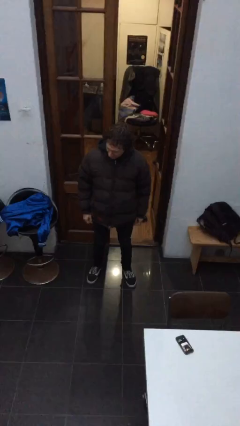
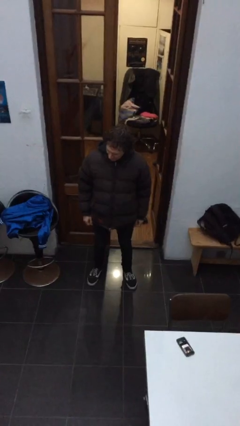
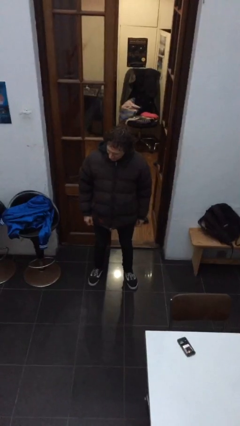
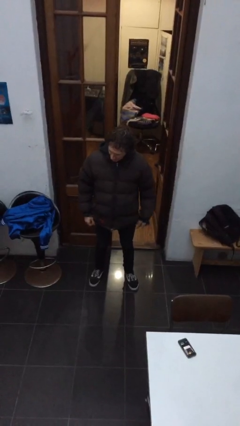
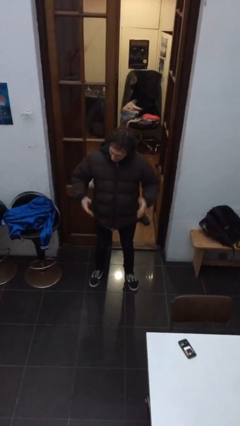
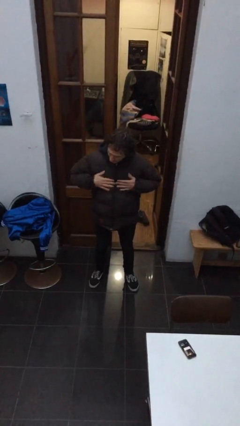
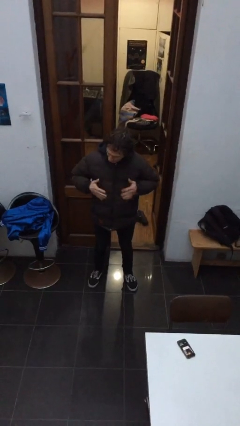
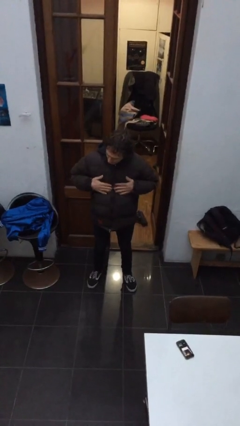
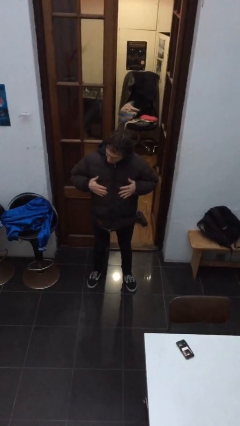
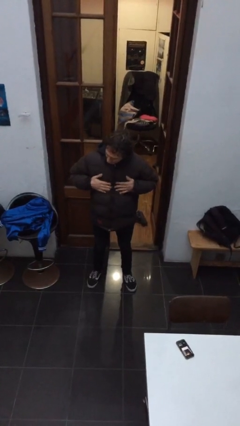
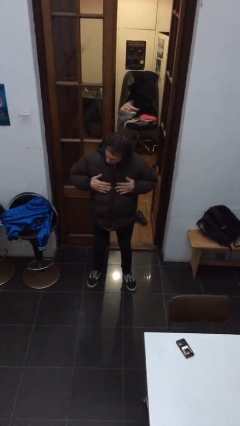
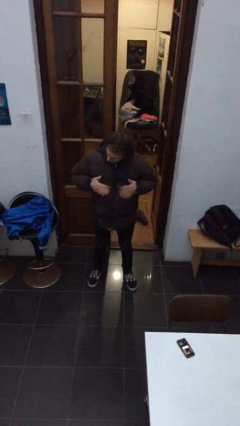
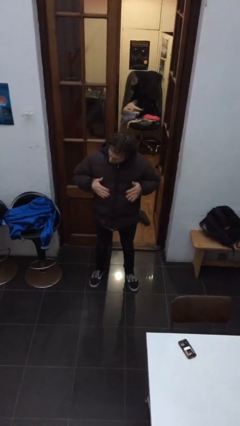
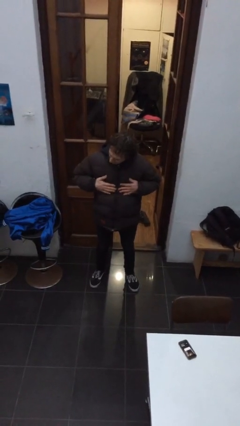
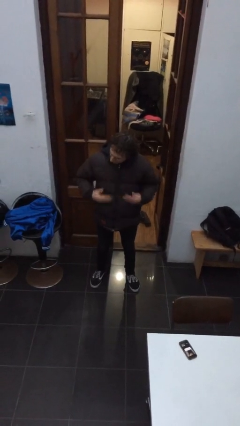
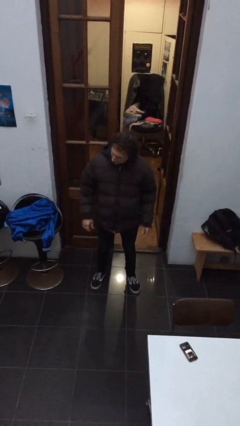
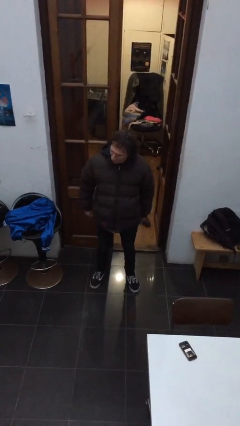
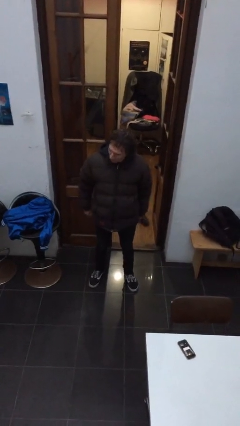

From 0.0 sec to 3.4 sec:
person drums on chest

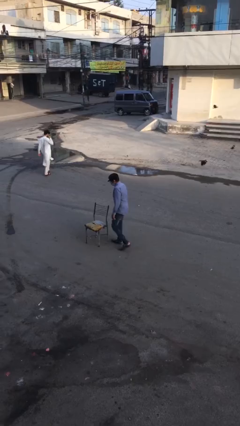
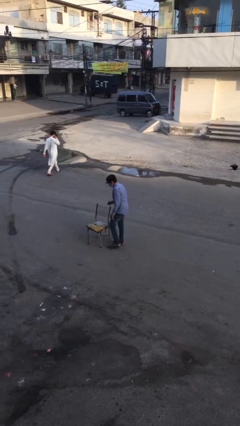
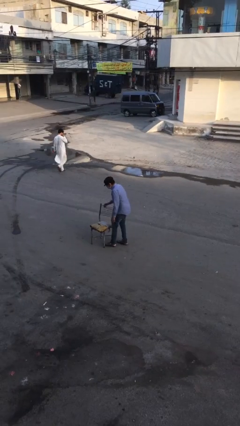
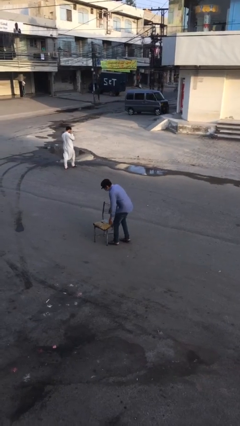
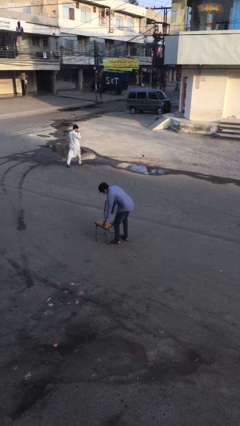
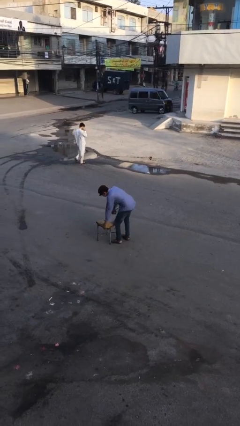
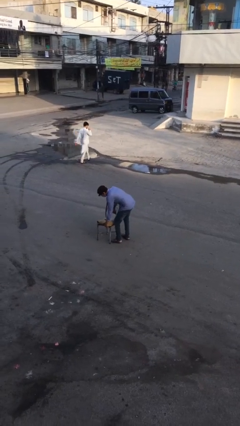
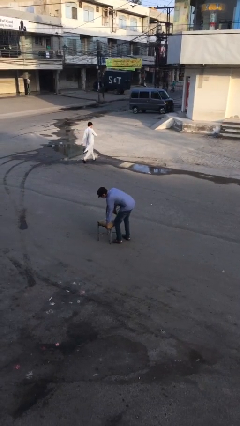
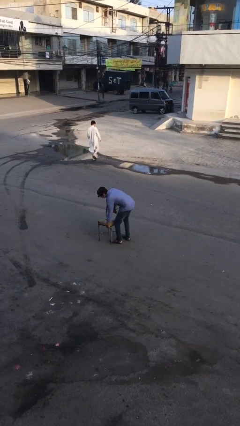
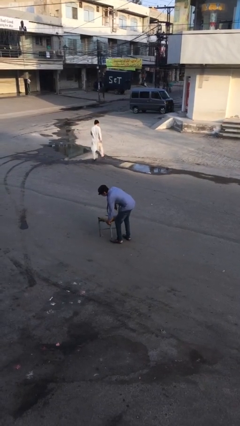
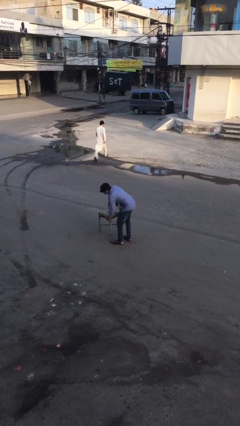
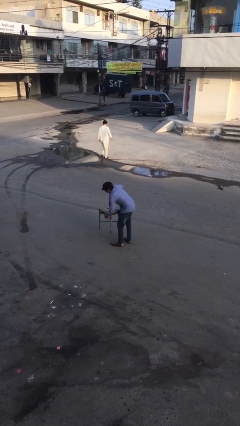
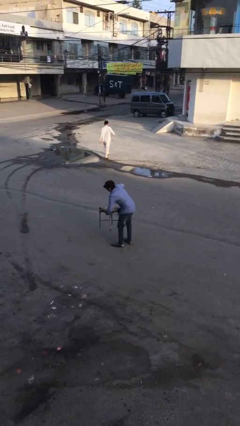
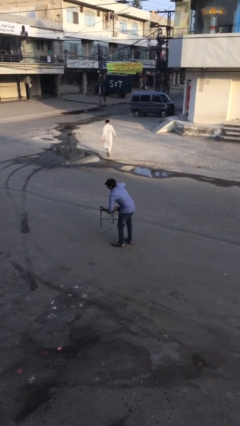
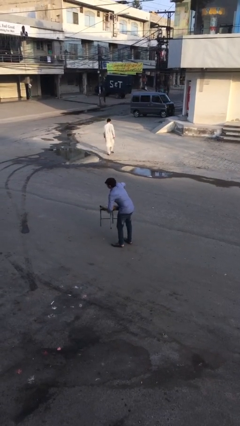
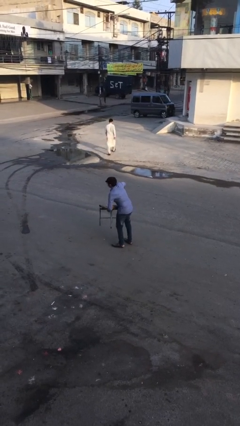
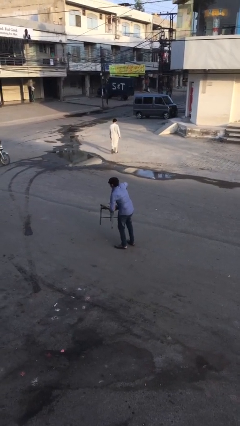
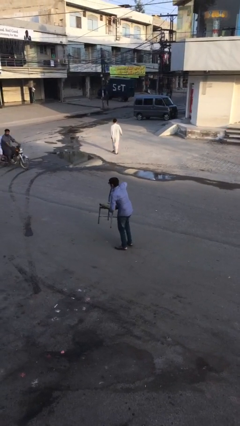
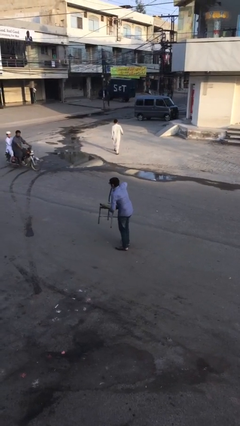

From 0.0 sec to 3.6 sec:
person picks up object from floor

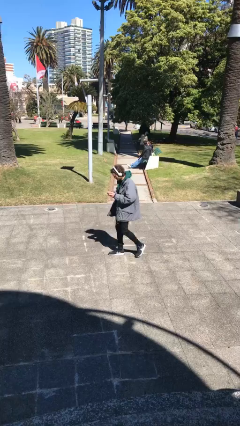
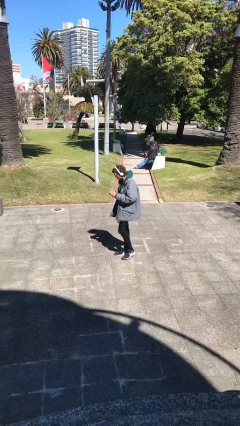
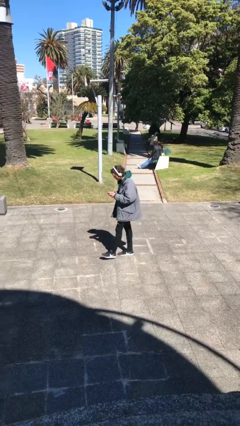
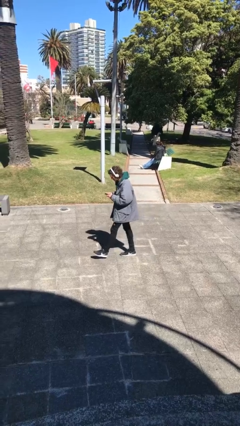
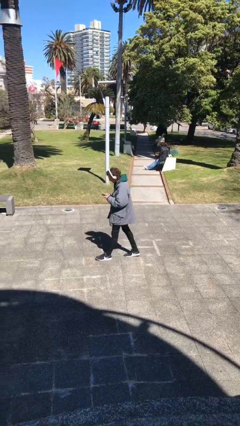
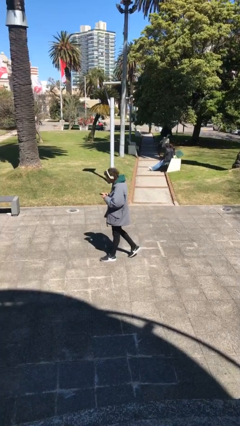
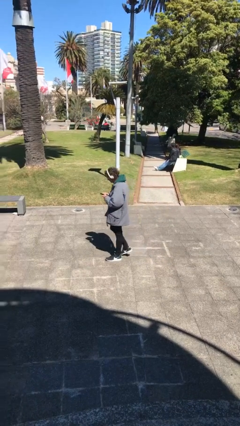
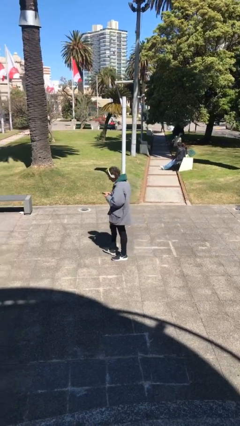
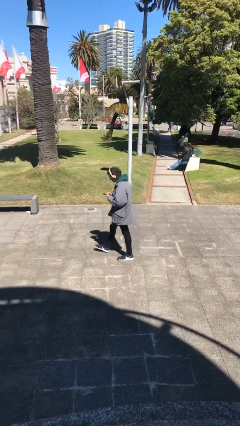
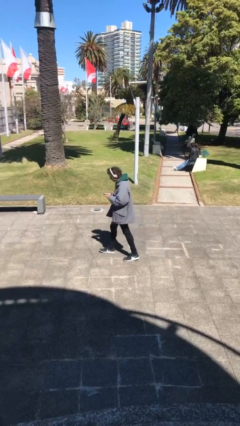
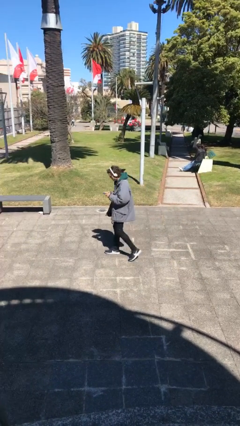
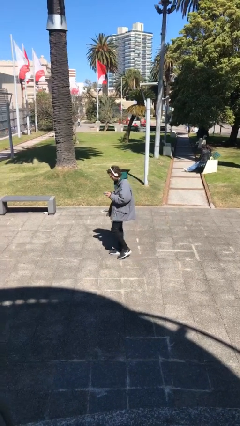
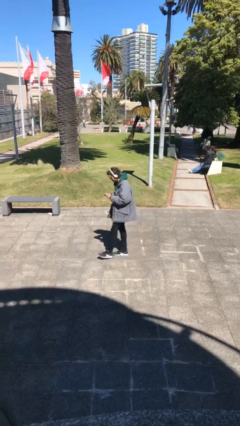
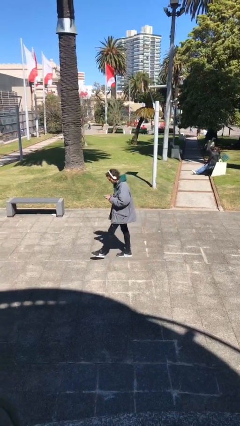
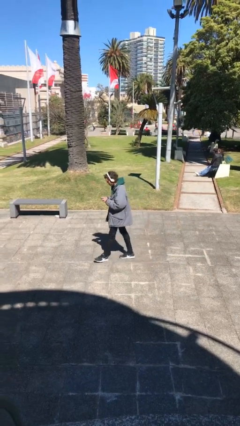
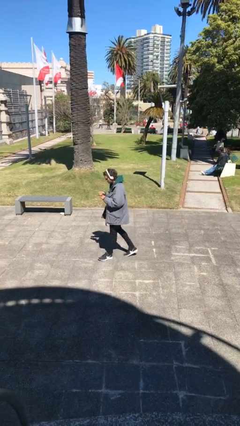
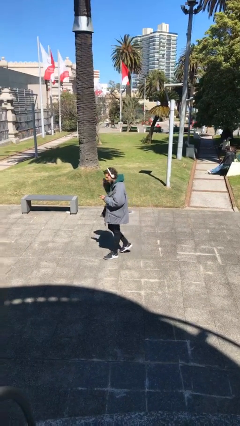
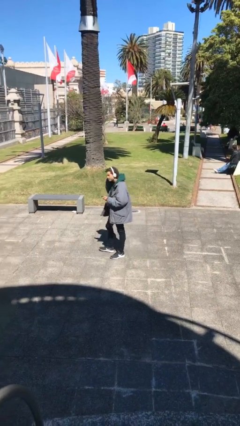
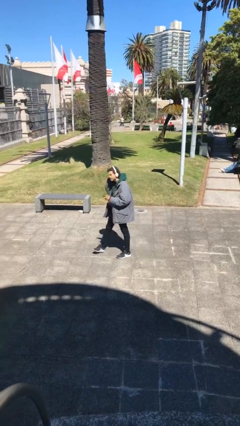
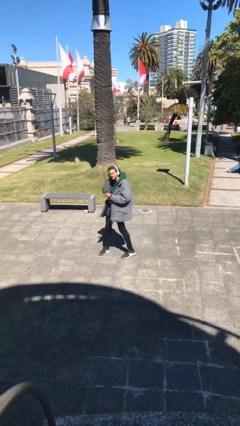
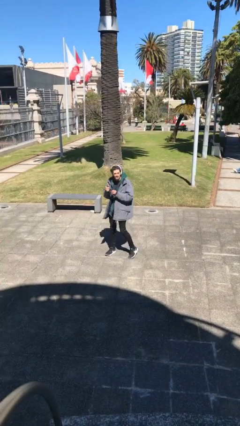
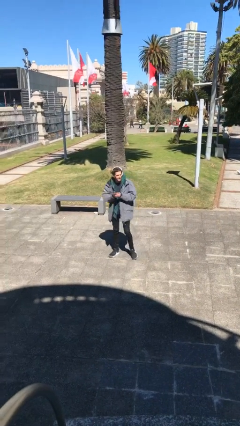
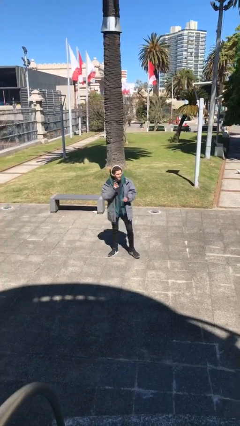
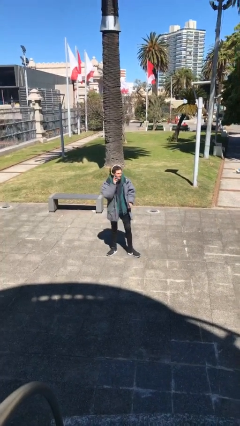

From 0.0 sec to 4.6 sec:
person texts on phone

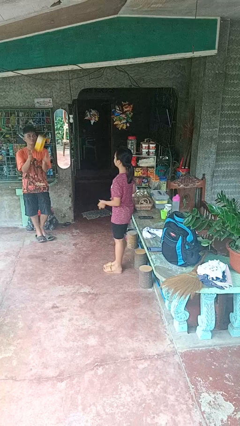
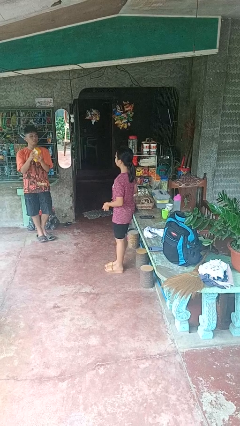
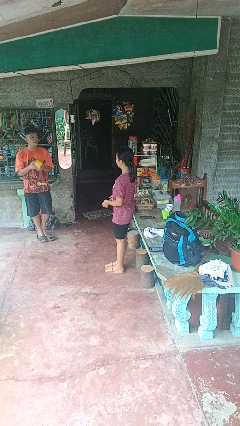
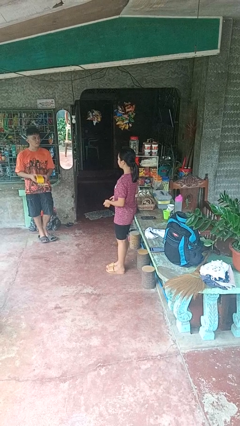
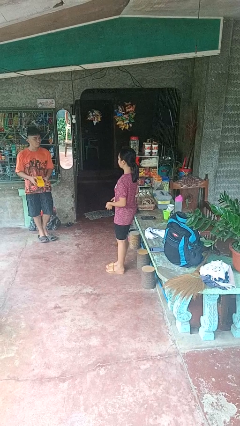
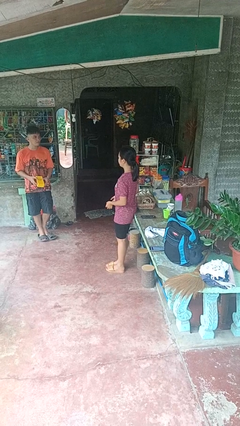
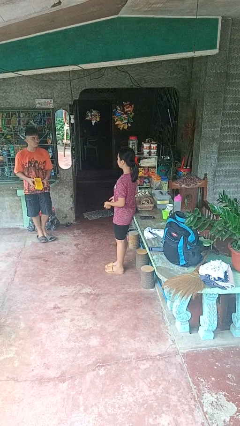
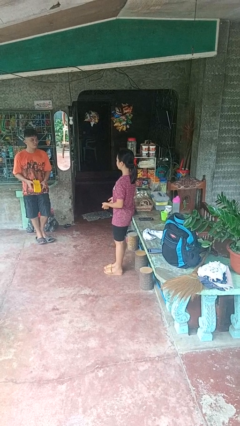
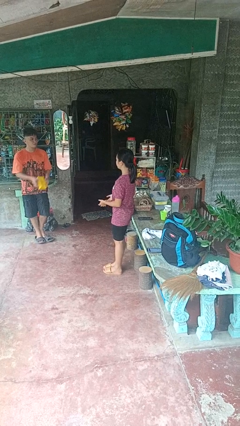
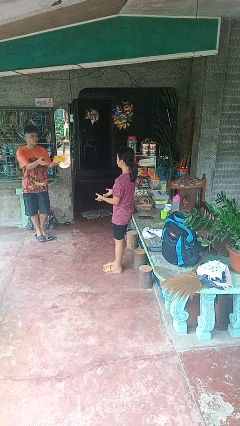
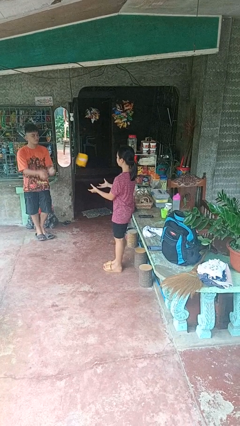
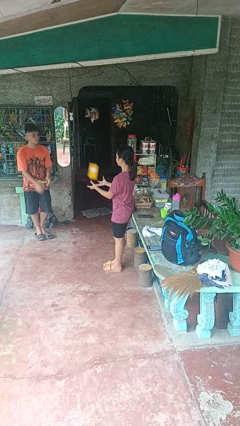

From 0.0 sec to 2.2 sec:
person throws object to person

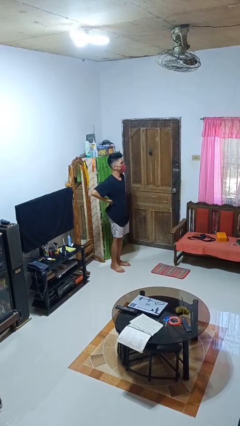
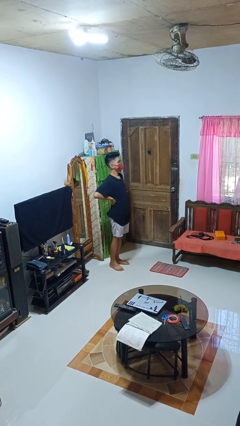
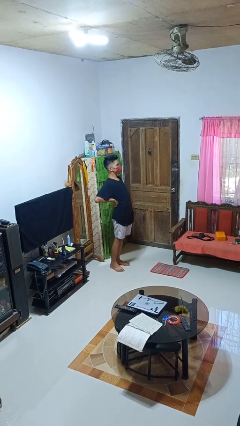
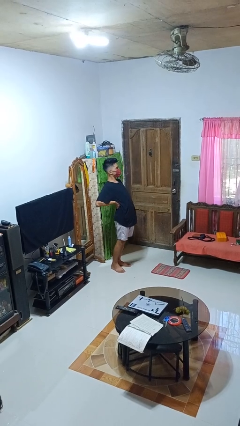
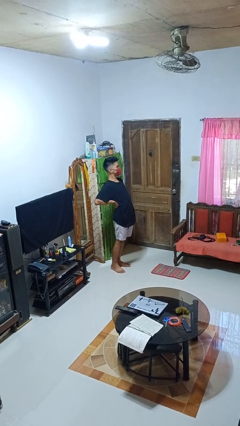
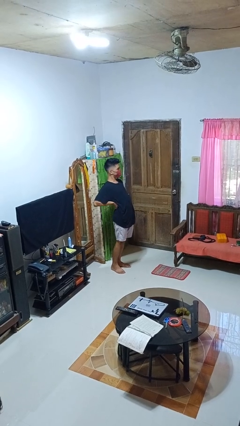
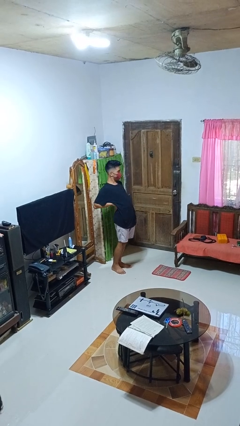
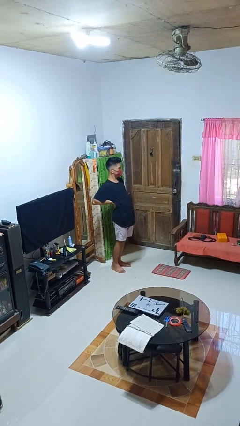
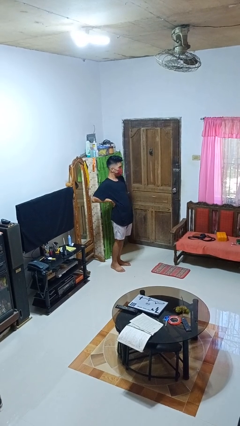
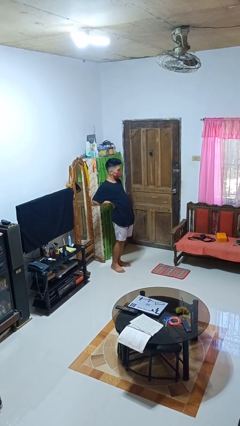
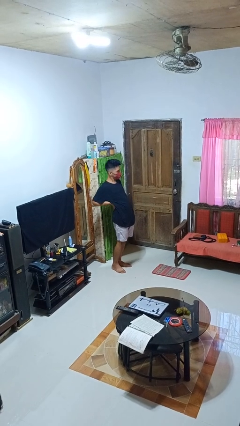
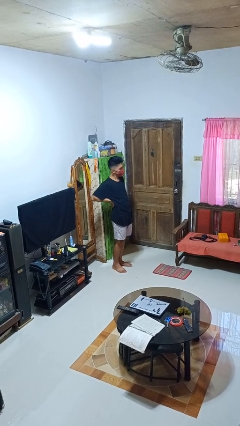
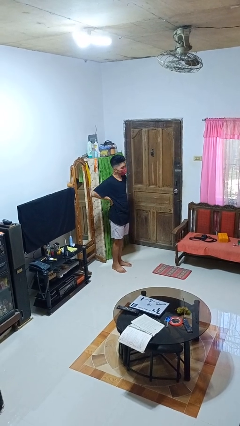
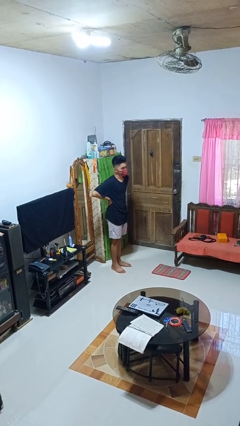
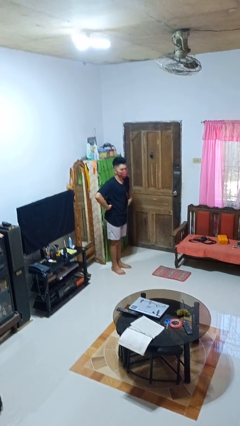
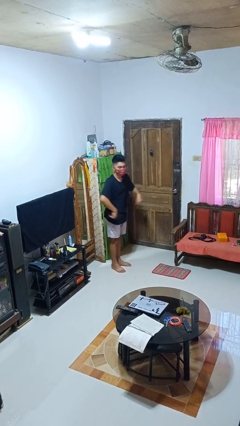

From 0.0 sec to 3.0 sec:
person stretches back

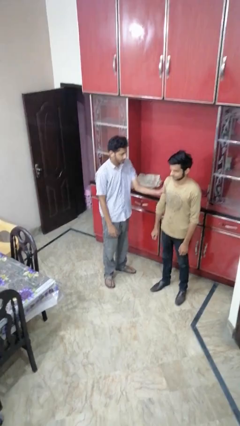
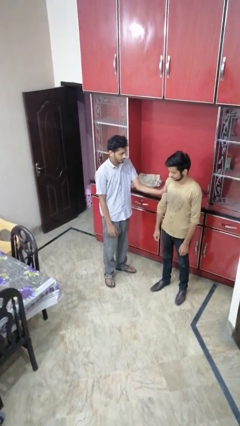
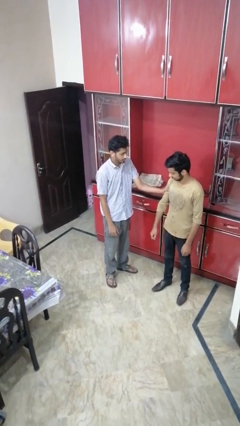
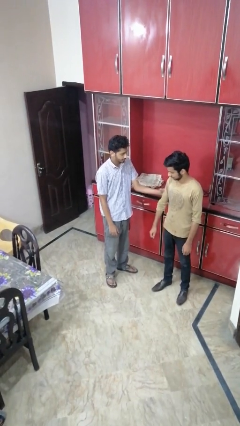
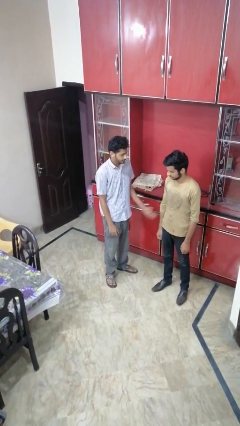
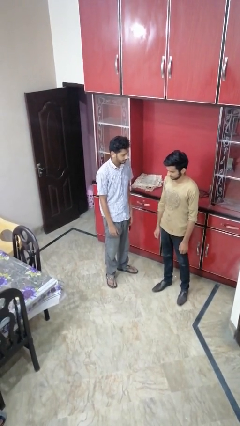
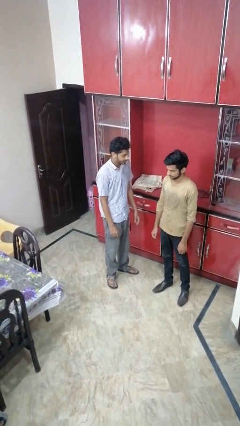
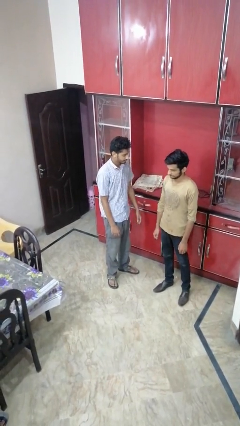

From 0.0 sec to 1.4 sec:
person grabs person by bicep
